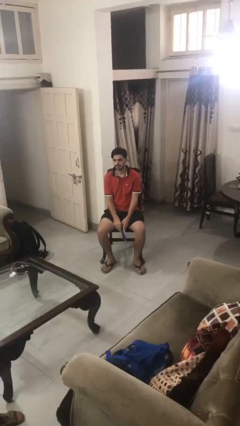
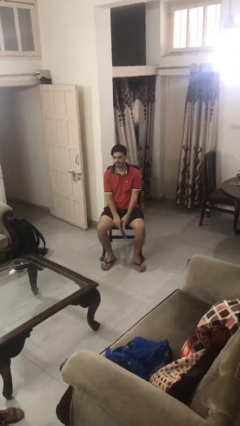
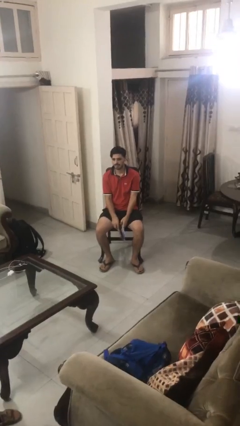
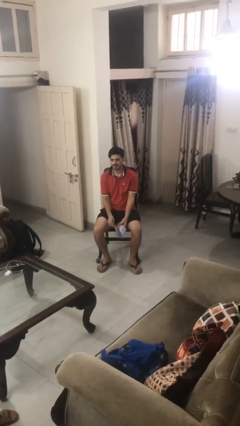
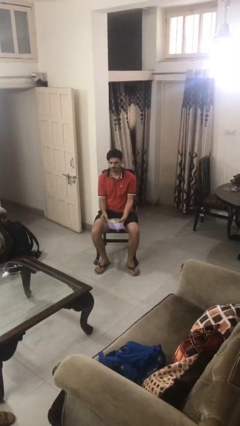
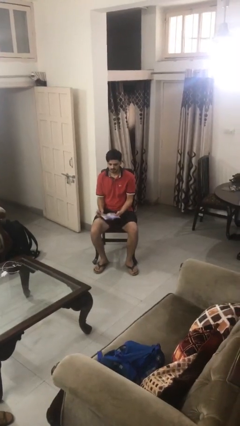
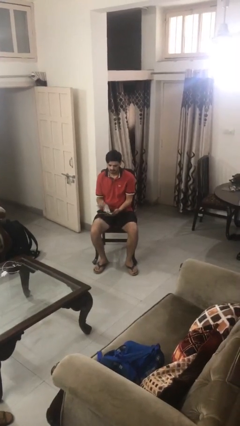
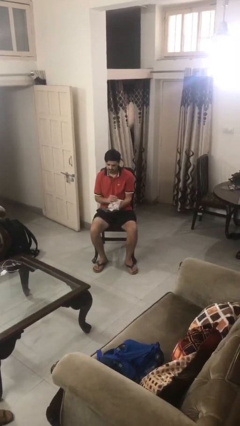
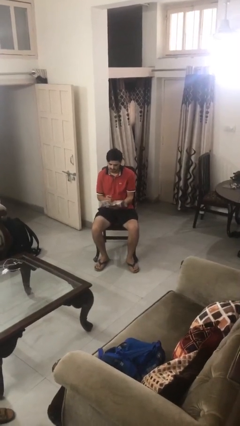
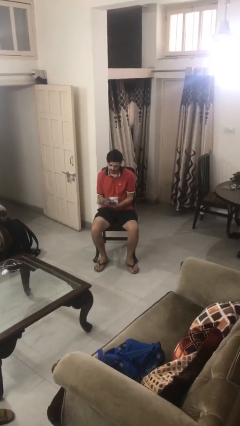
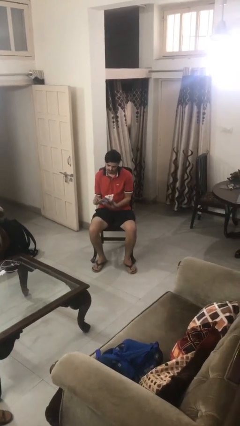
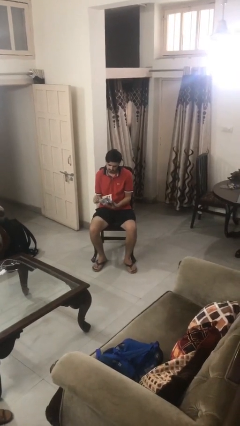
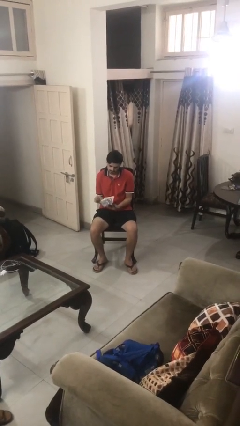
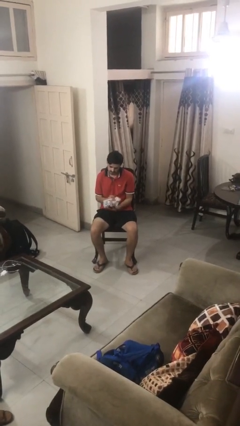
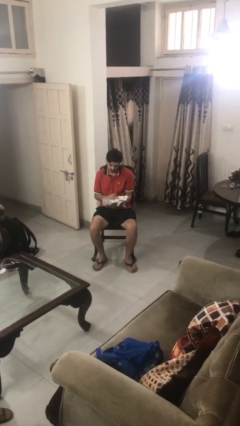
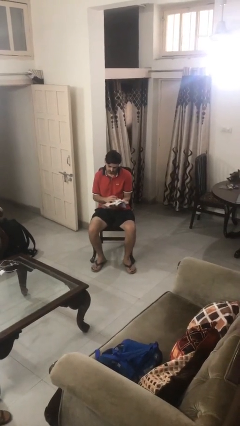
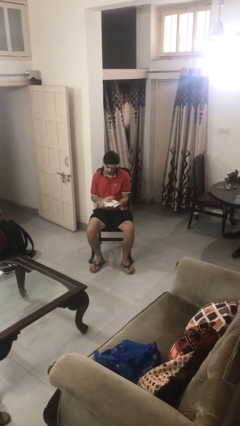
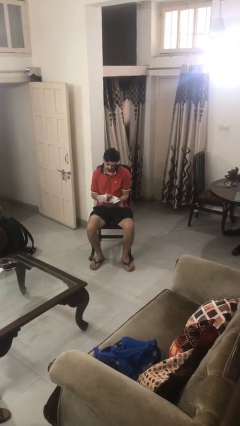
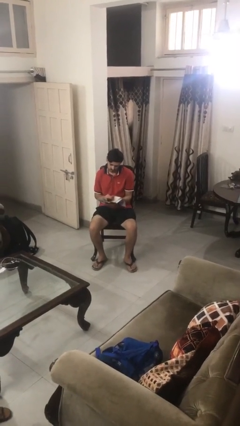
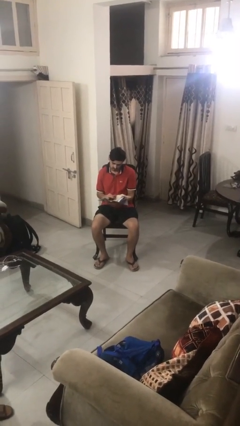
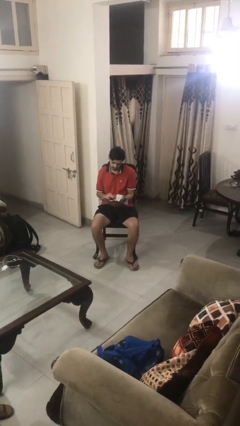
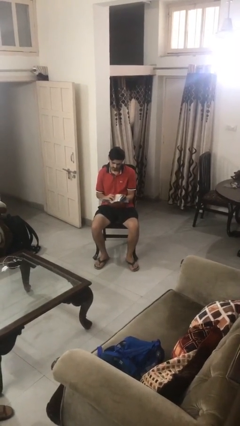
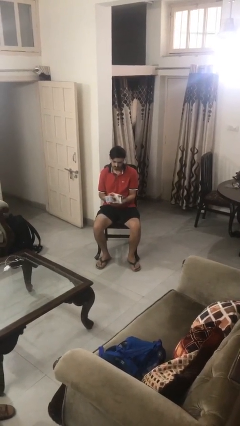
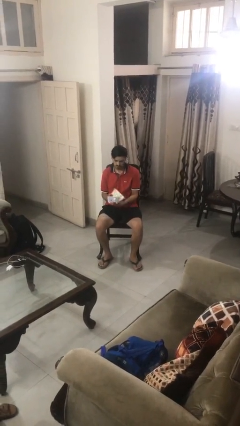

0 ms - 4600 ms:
person reads magazine

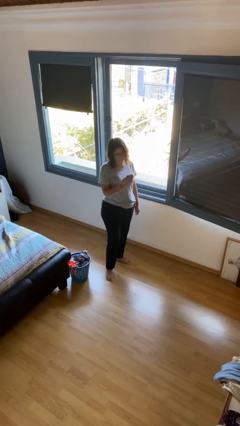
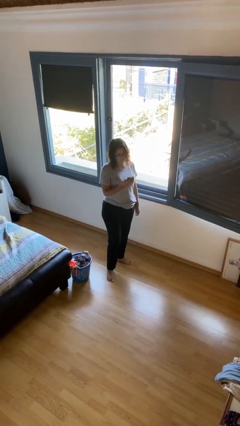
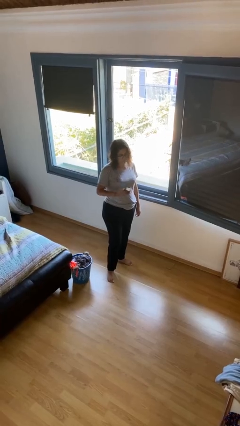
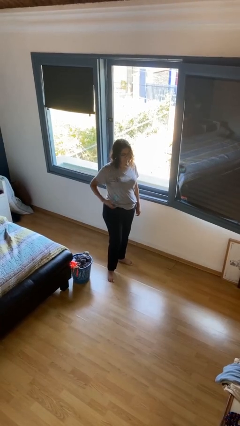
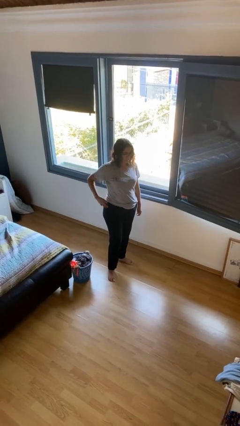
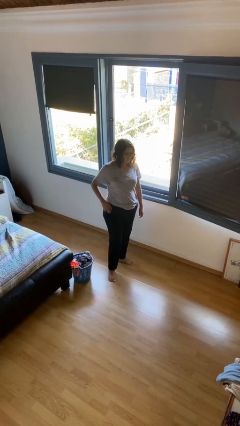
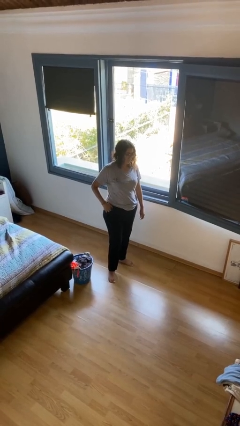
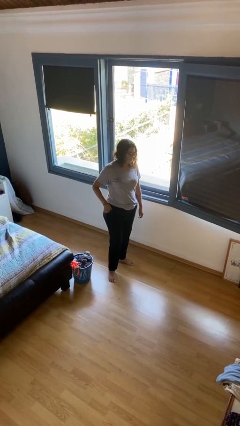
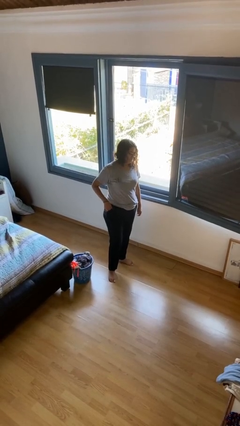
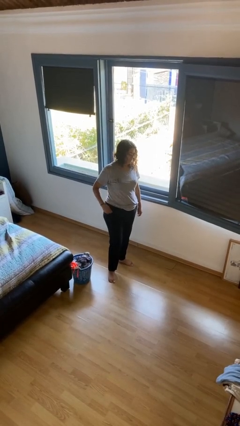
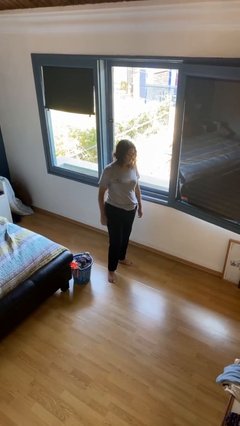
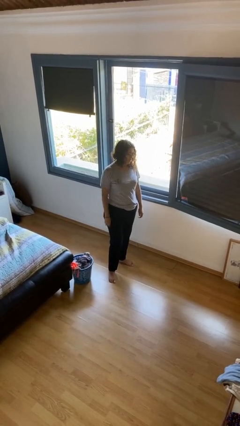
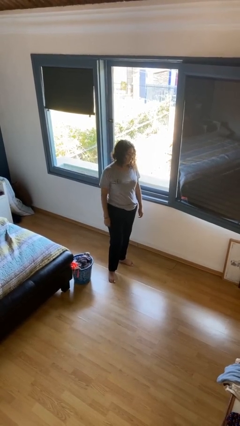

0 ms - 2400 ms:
person puts phone into pocket

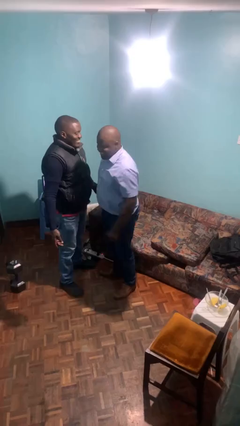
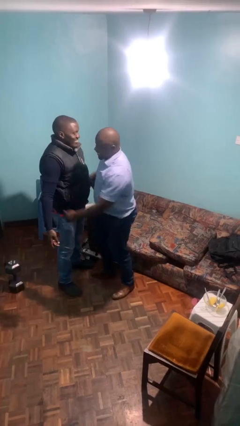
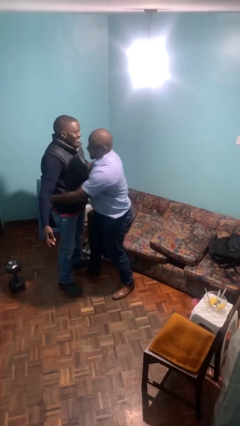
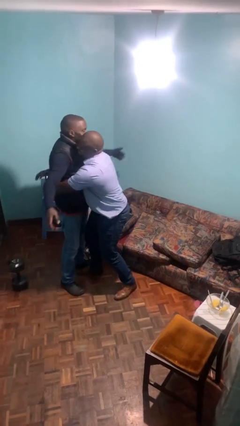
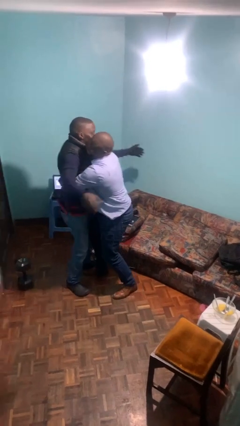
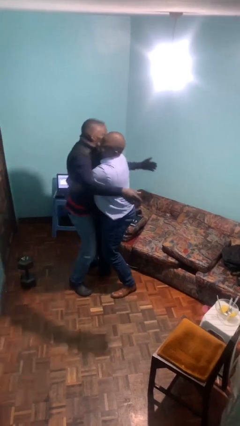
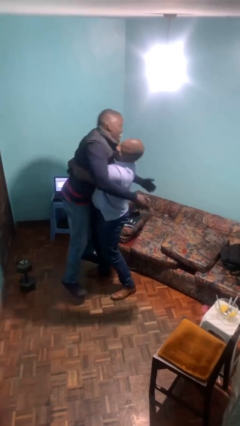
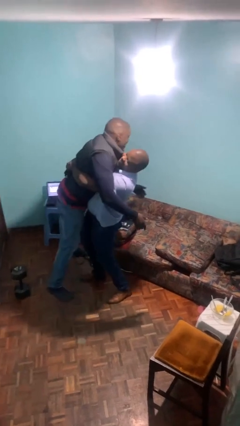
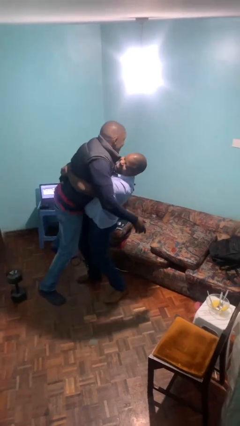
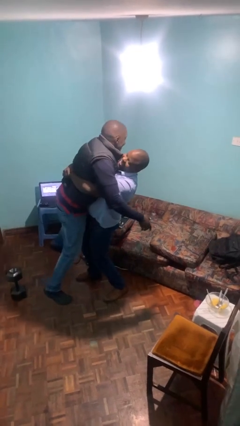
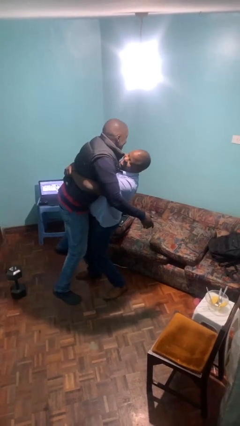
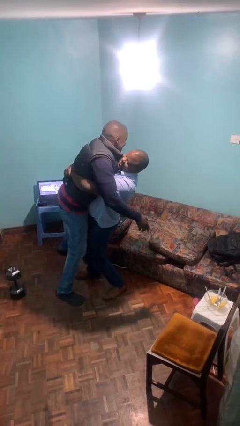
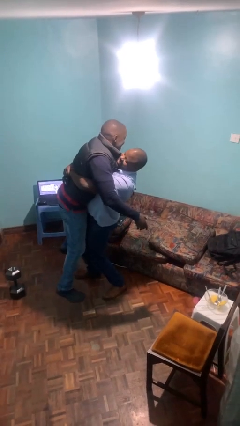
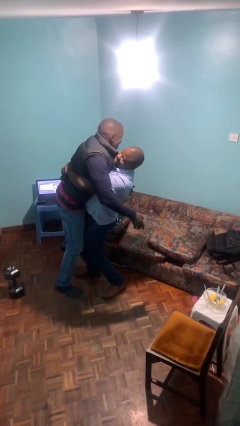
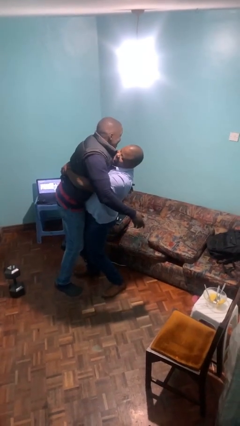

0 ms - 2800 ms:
person picks up person

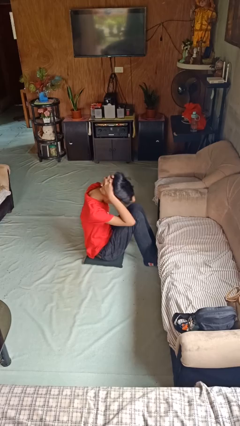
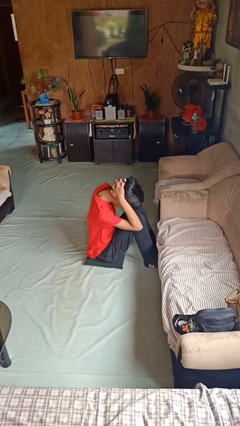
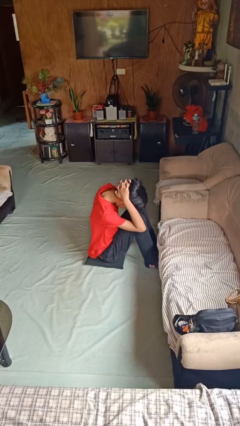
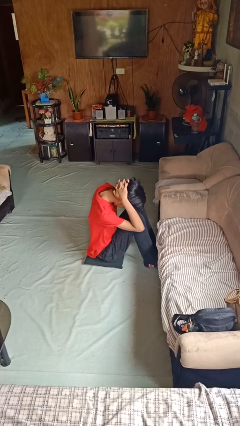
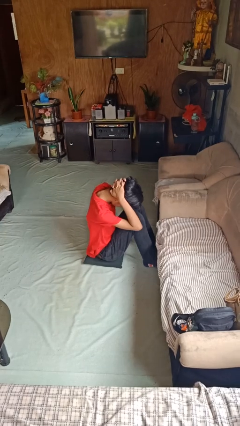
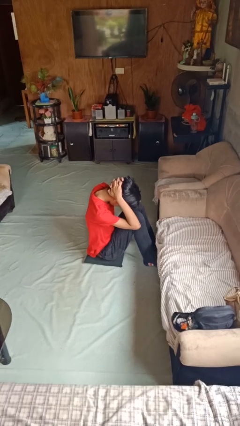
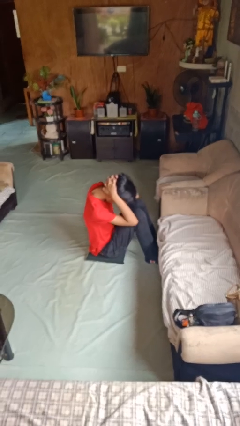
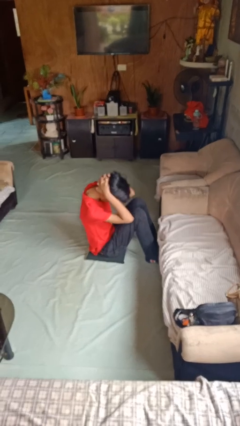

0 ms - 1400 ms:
person exercises with situp

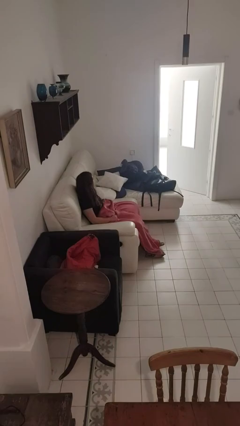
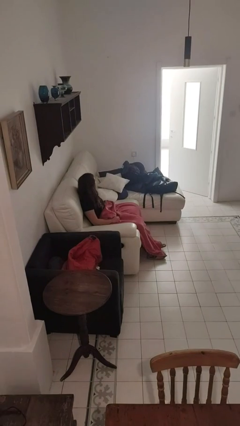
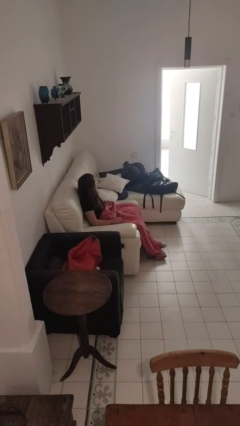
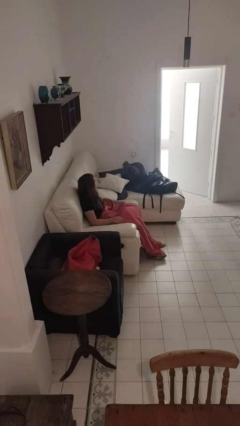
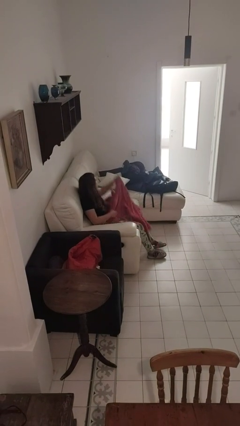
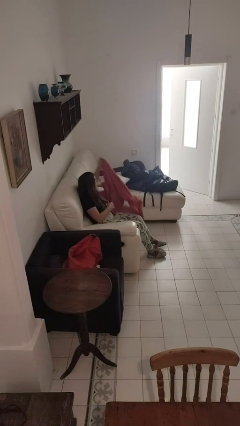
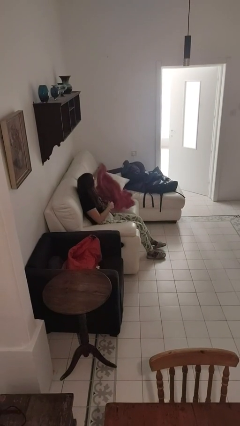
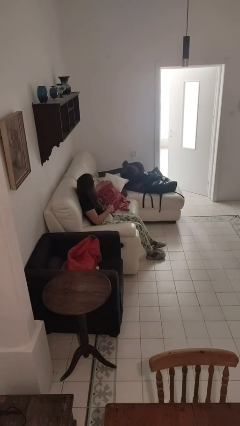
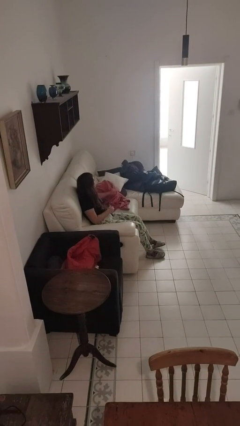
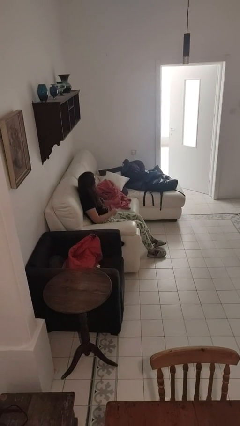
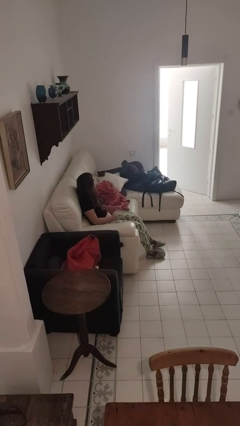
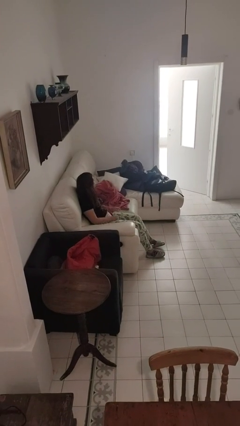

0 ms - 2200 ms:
person uncovers with blanket

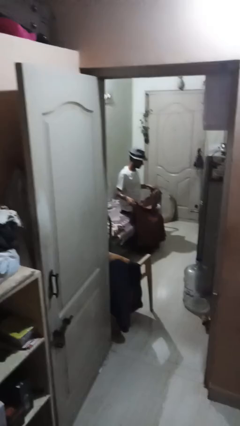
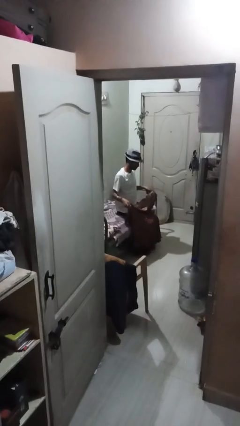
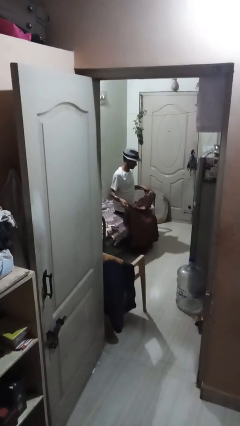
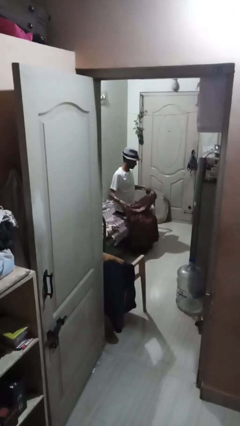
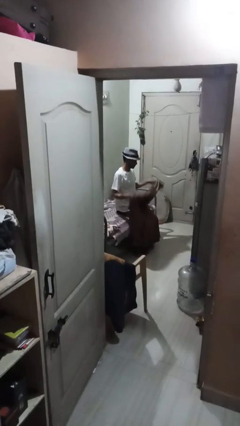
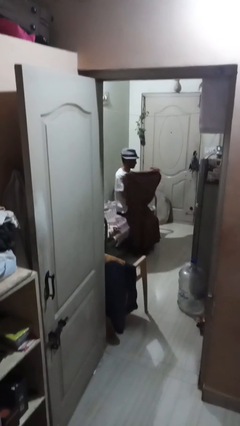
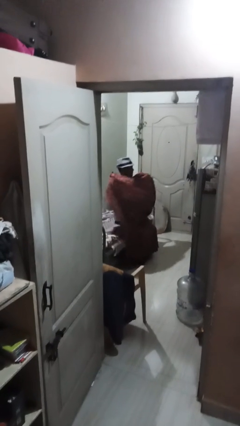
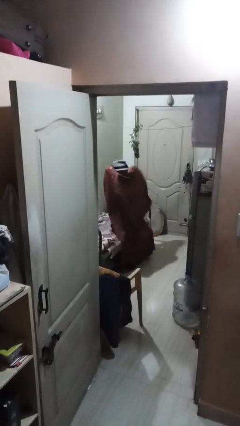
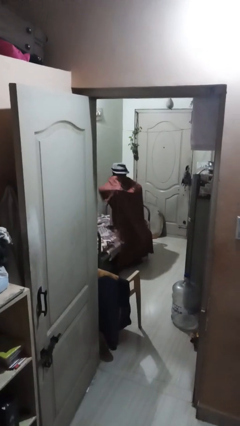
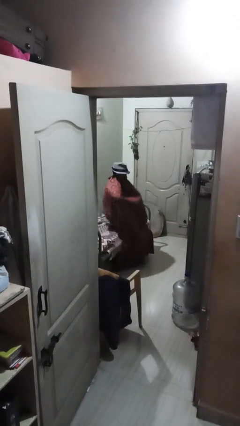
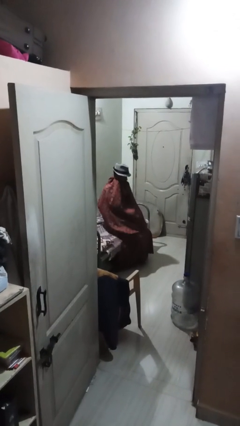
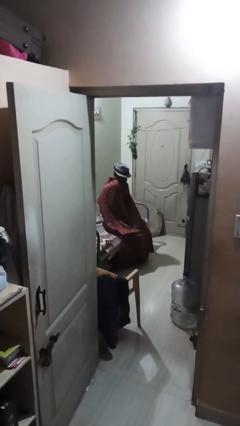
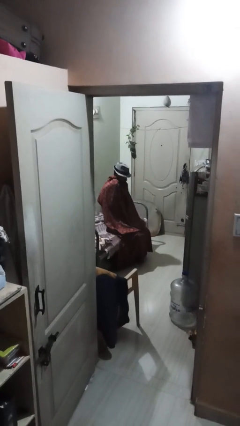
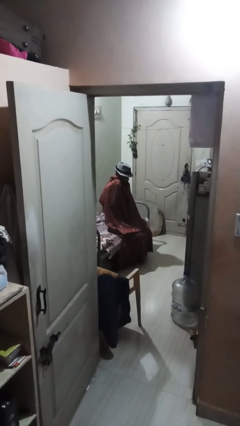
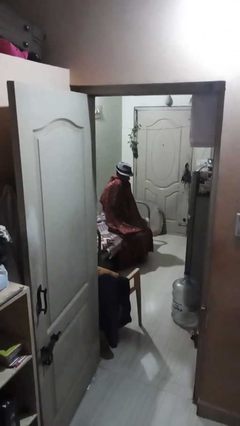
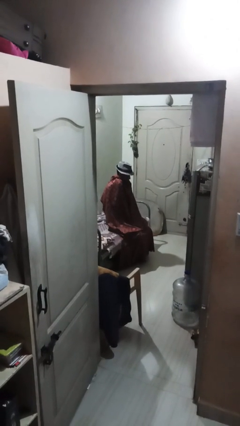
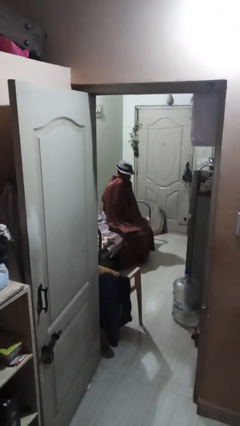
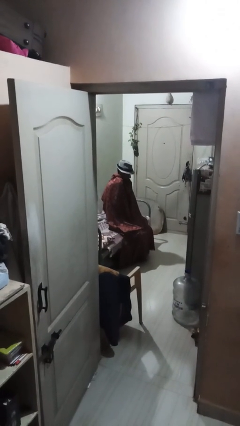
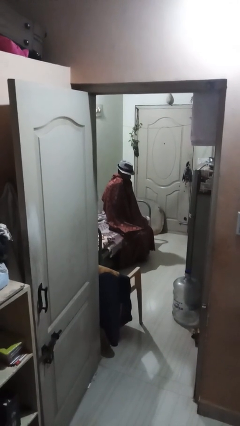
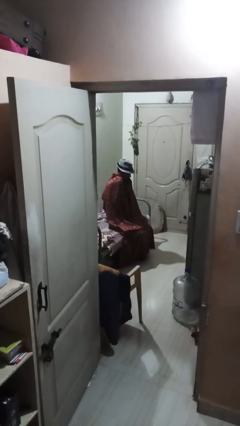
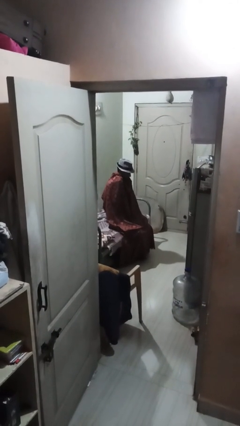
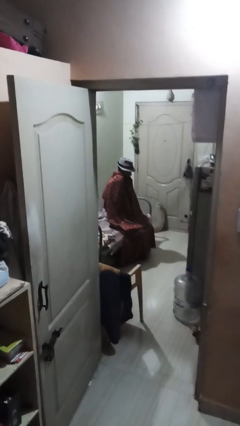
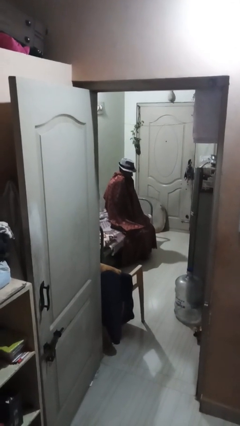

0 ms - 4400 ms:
person covers with blanket
